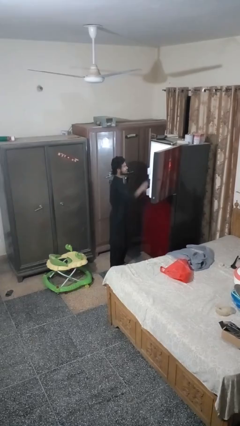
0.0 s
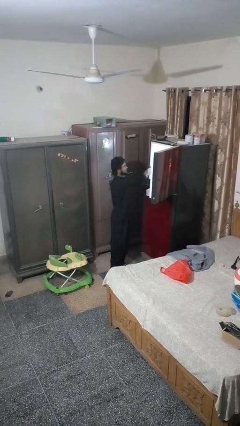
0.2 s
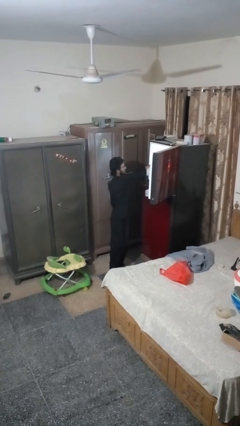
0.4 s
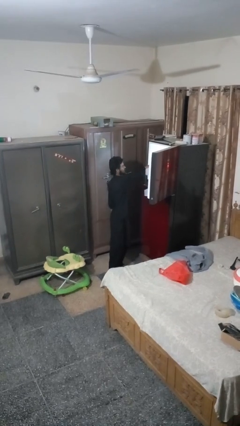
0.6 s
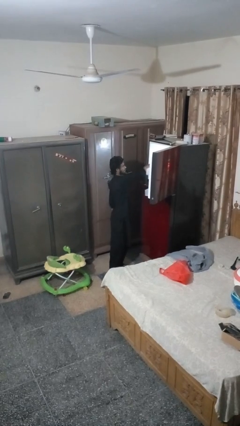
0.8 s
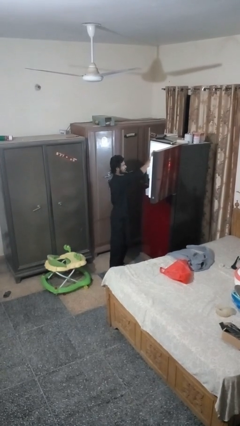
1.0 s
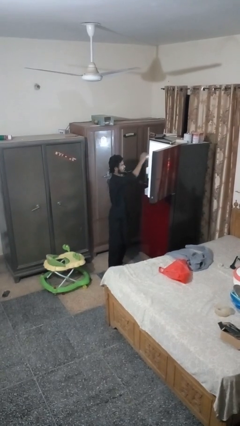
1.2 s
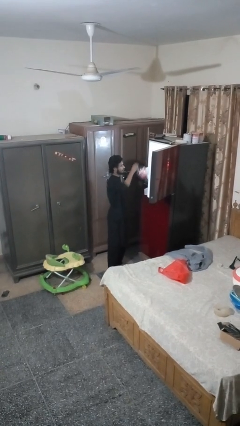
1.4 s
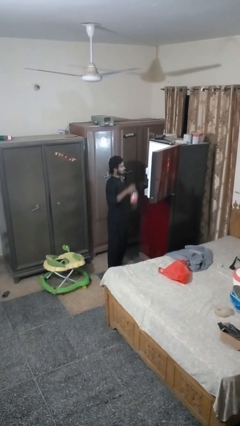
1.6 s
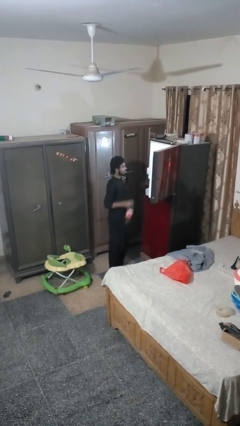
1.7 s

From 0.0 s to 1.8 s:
person takes object from refrigerator

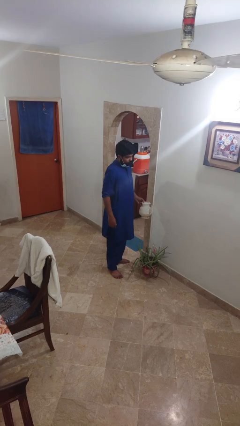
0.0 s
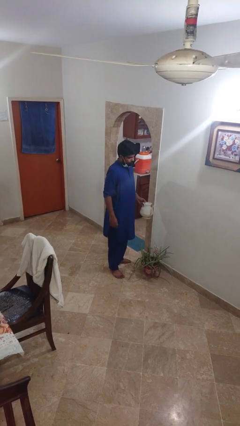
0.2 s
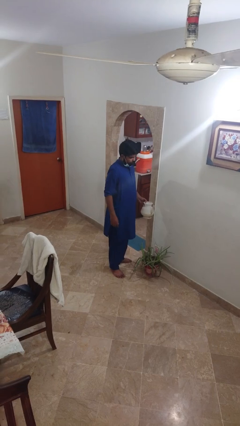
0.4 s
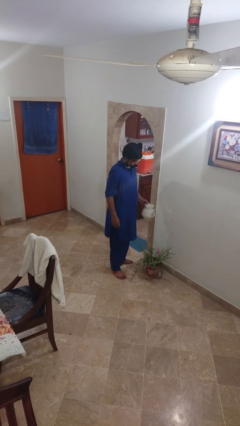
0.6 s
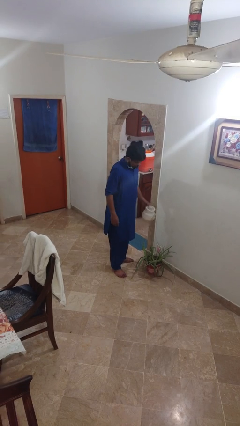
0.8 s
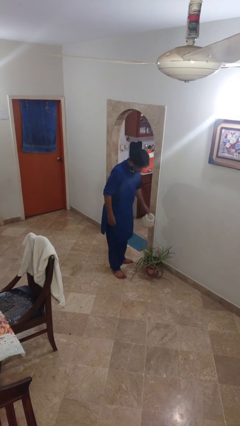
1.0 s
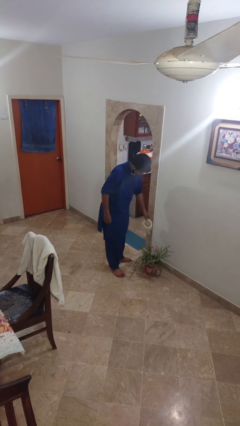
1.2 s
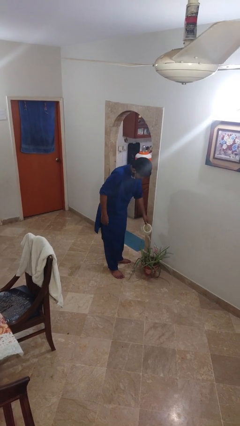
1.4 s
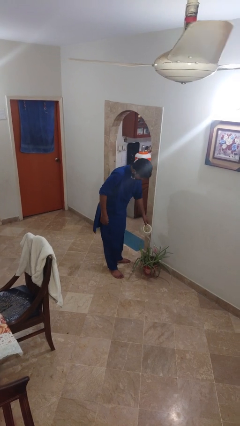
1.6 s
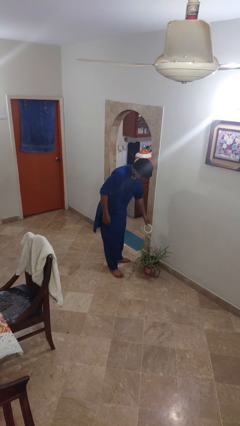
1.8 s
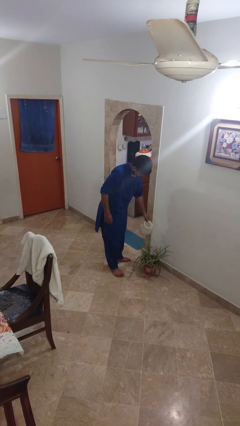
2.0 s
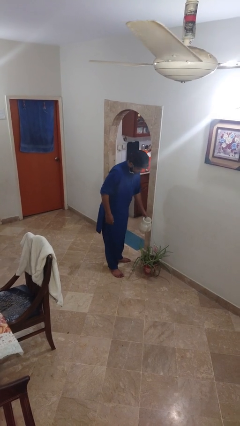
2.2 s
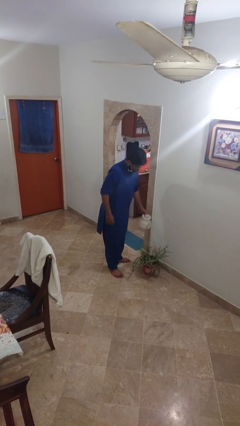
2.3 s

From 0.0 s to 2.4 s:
person waters houseplant

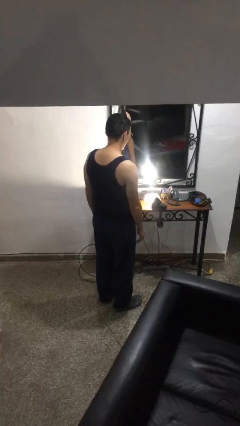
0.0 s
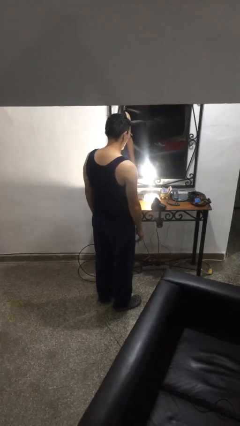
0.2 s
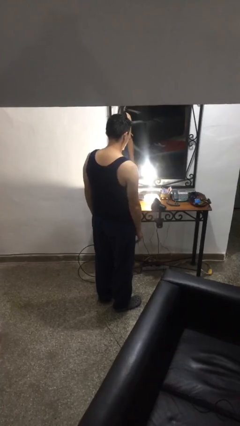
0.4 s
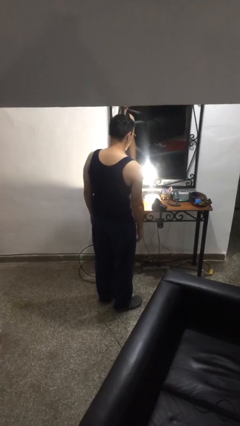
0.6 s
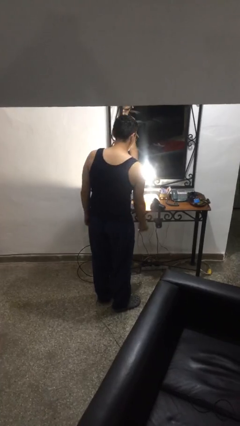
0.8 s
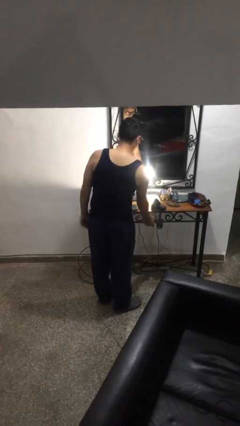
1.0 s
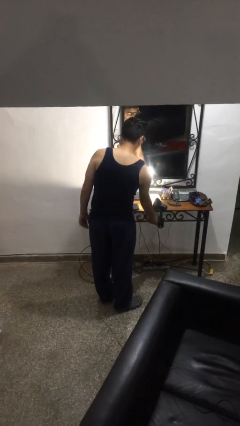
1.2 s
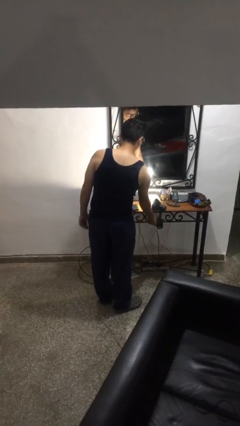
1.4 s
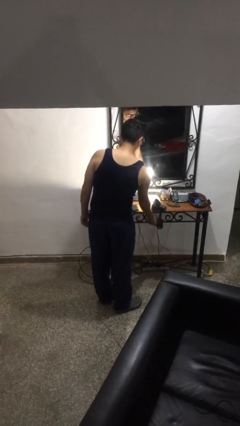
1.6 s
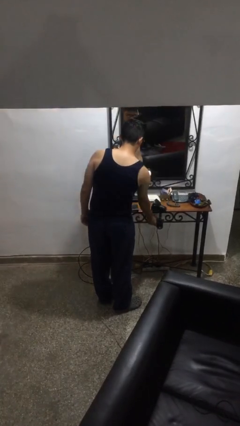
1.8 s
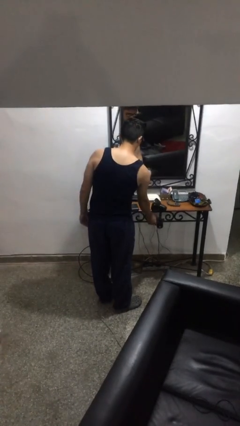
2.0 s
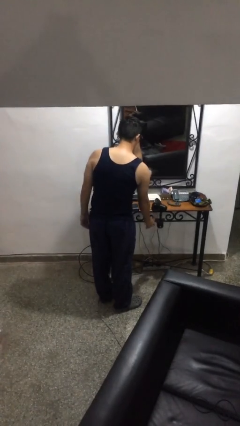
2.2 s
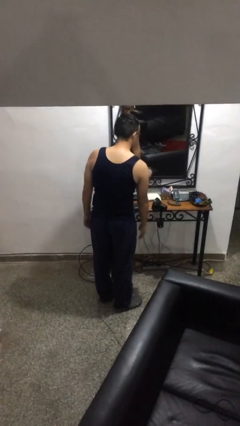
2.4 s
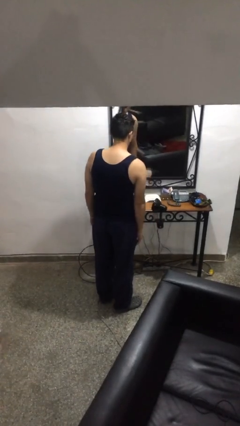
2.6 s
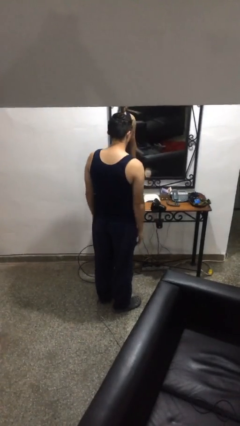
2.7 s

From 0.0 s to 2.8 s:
person turns off lamp

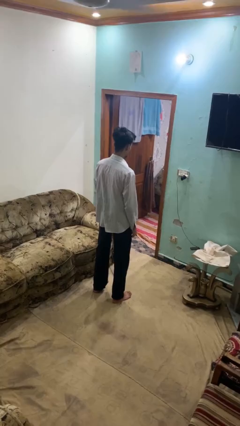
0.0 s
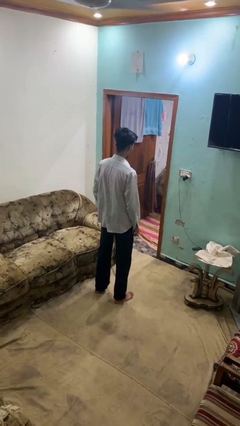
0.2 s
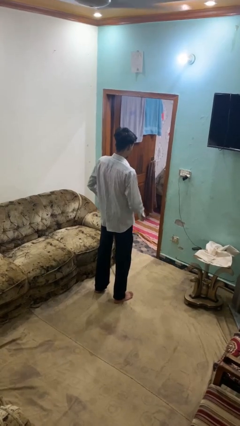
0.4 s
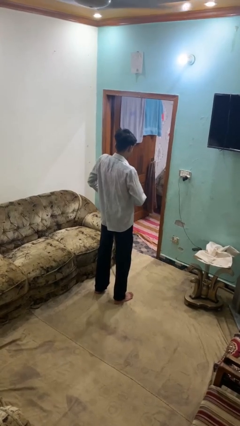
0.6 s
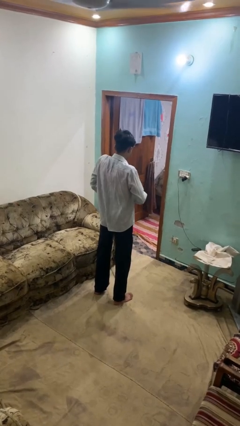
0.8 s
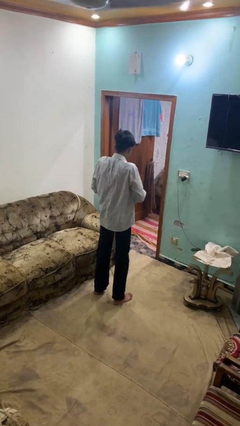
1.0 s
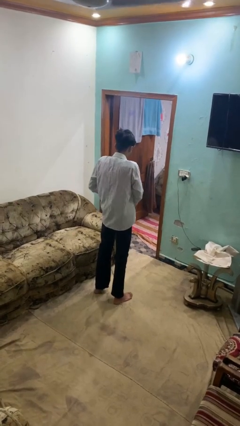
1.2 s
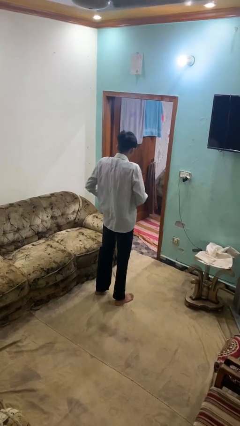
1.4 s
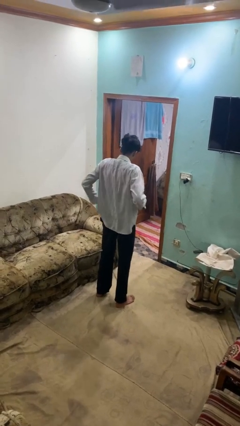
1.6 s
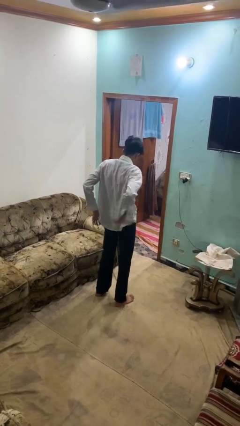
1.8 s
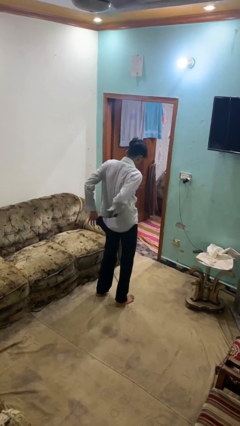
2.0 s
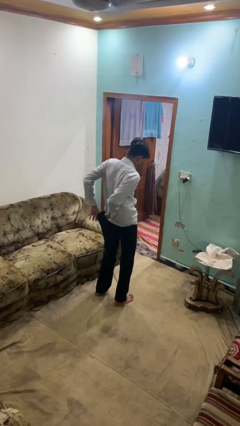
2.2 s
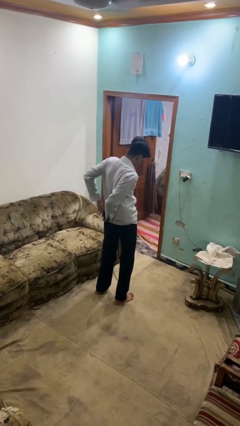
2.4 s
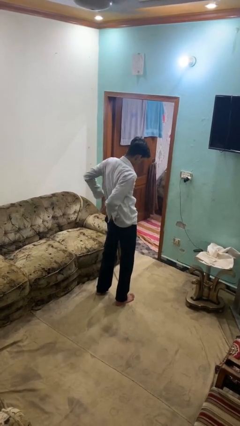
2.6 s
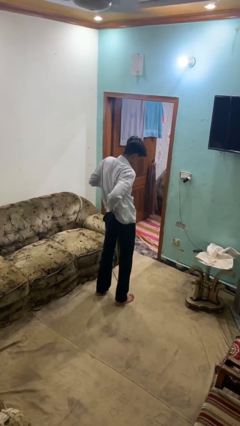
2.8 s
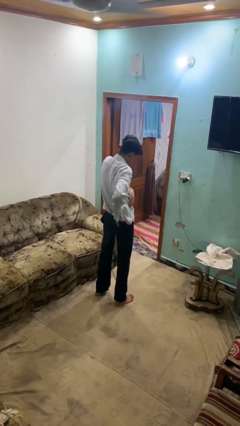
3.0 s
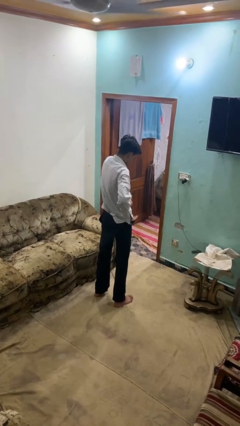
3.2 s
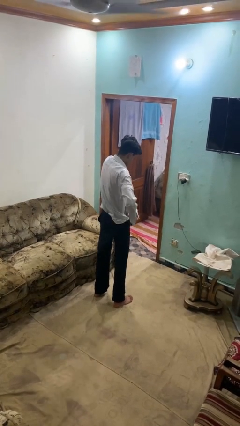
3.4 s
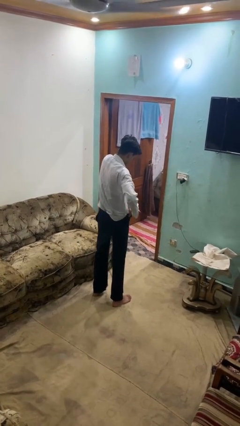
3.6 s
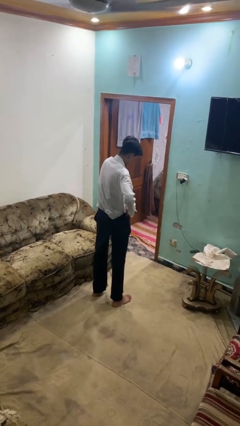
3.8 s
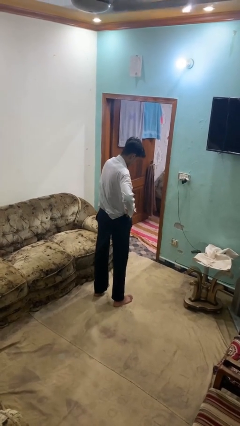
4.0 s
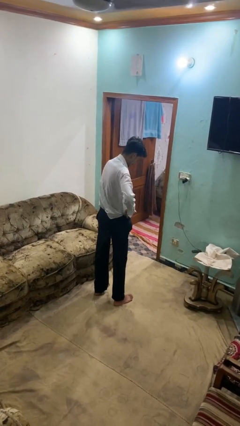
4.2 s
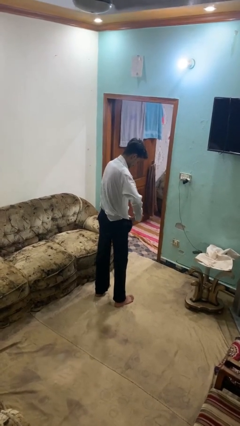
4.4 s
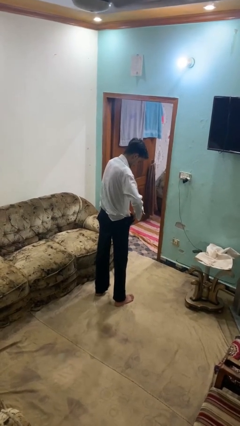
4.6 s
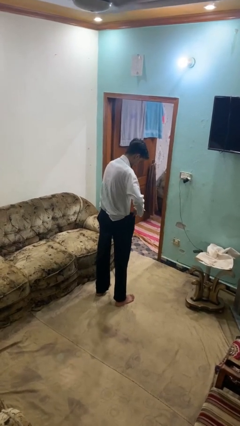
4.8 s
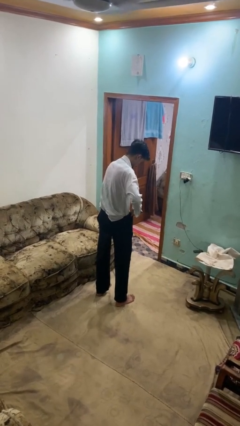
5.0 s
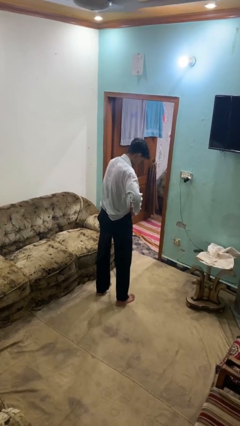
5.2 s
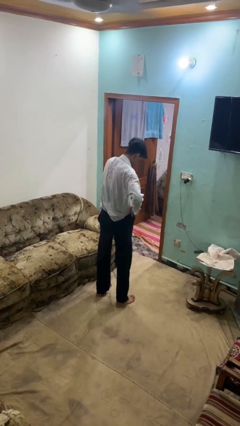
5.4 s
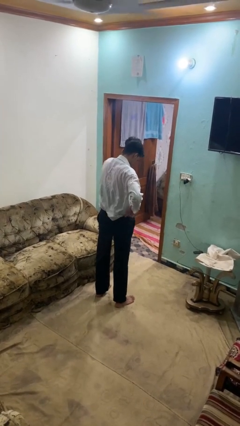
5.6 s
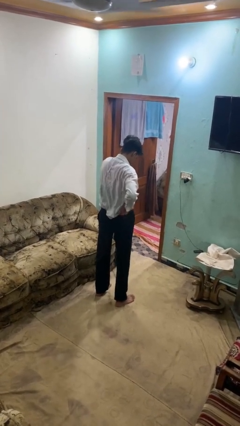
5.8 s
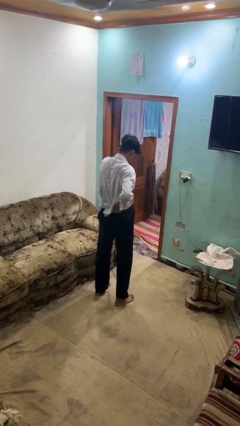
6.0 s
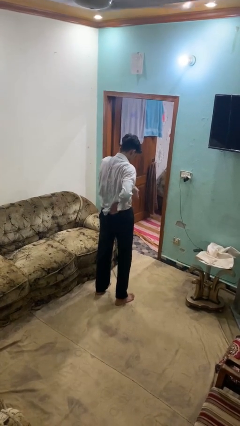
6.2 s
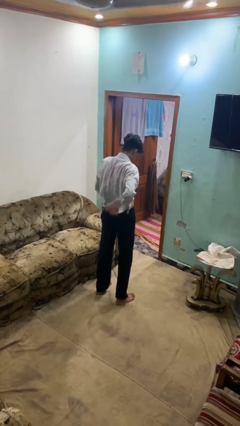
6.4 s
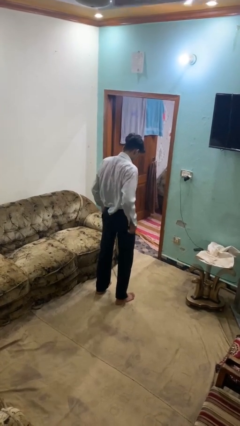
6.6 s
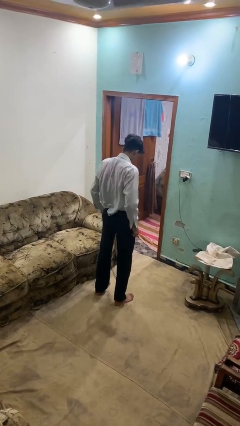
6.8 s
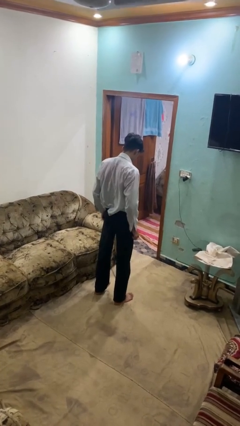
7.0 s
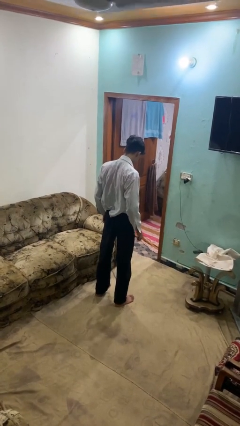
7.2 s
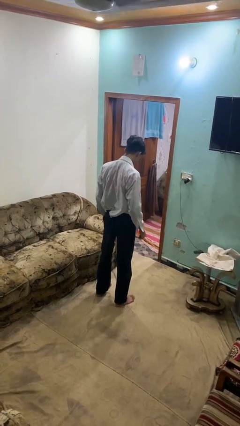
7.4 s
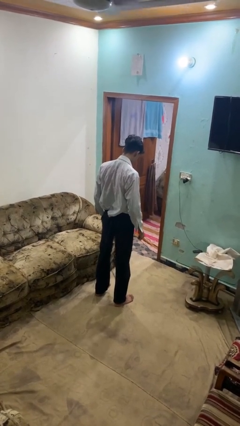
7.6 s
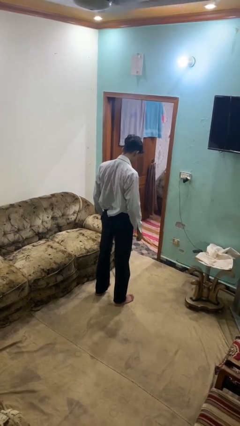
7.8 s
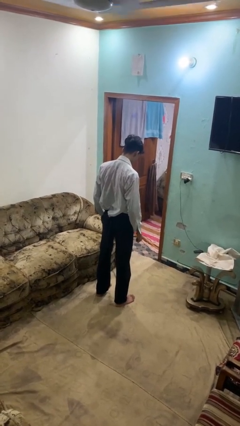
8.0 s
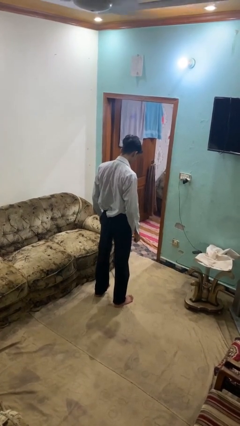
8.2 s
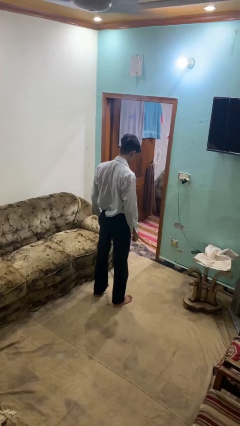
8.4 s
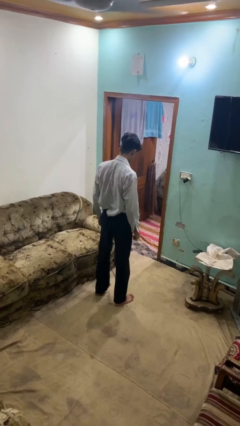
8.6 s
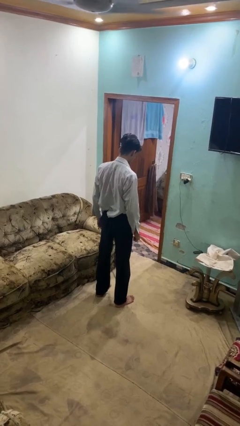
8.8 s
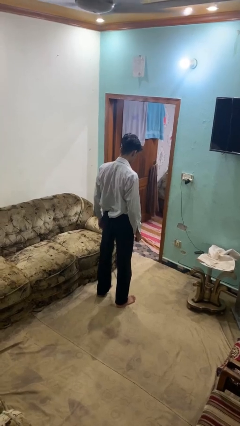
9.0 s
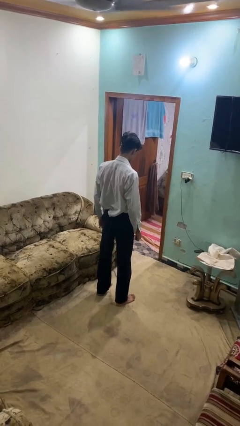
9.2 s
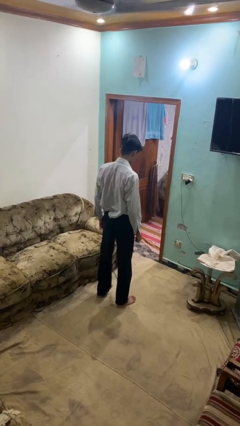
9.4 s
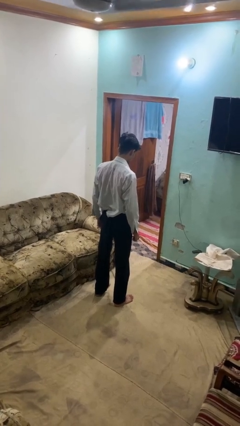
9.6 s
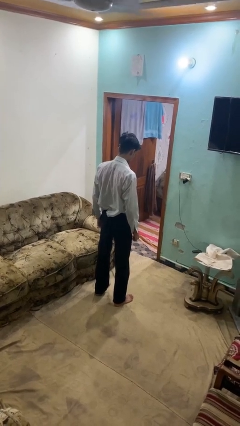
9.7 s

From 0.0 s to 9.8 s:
person tucks in shirt

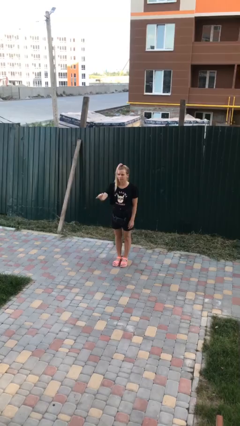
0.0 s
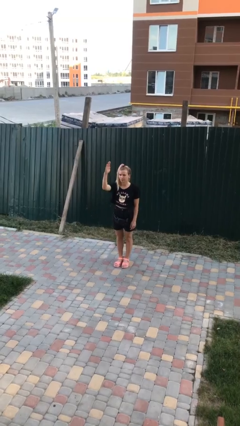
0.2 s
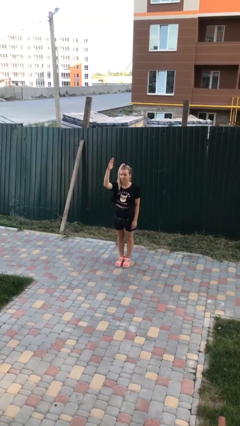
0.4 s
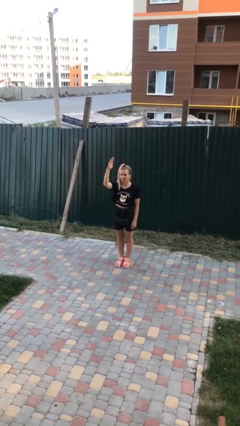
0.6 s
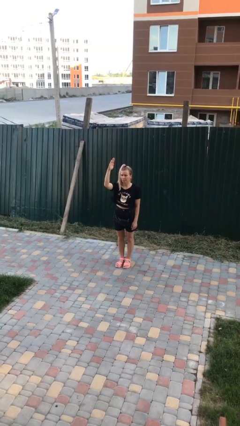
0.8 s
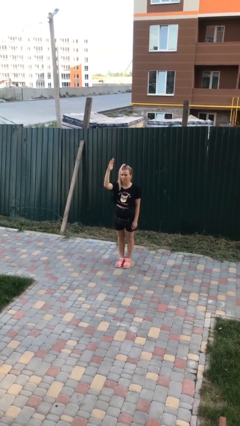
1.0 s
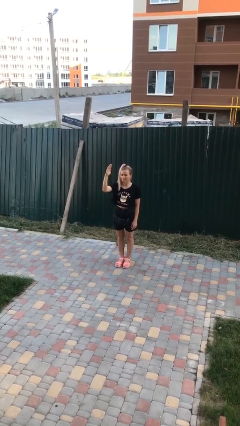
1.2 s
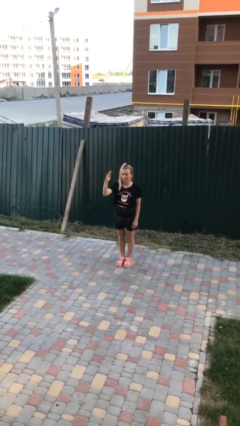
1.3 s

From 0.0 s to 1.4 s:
person gestures raise hand
